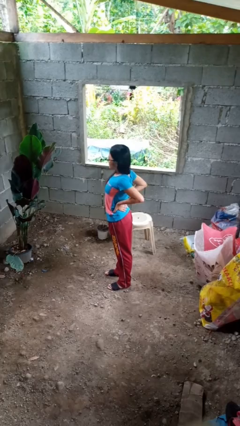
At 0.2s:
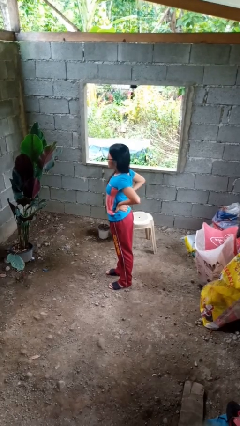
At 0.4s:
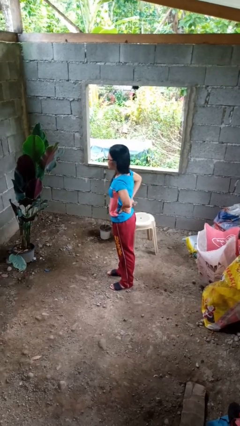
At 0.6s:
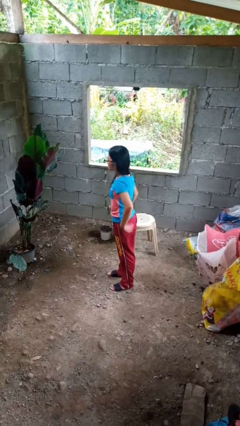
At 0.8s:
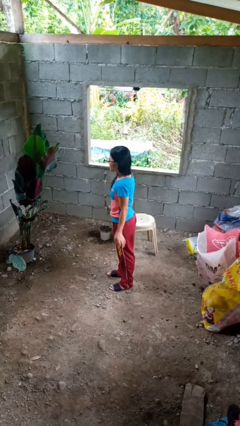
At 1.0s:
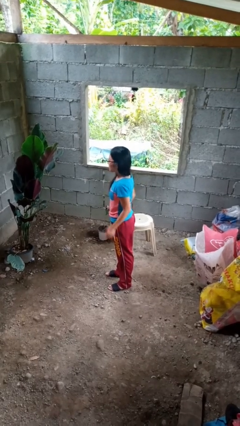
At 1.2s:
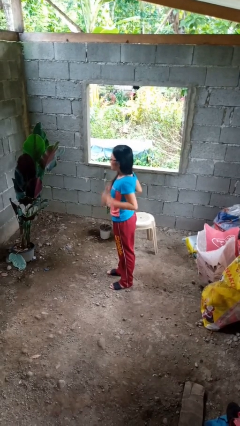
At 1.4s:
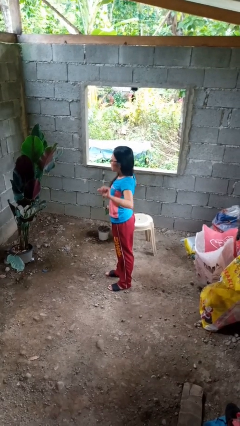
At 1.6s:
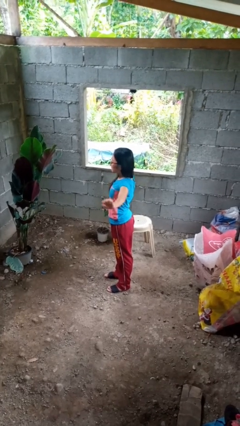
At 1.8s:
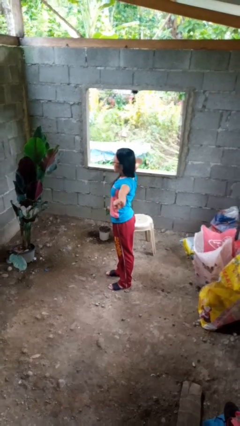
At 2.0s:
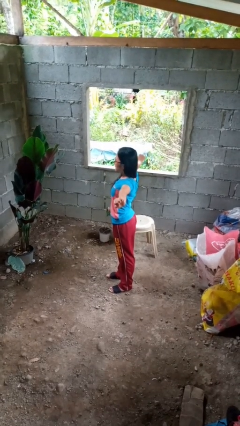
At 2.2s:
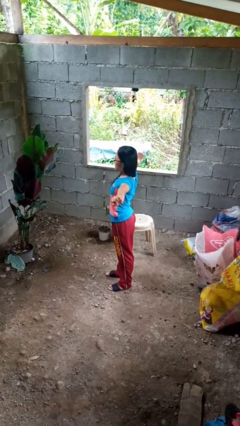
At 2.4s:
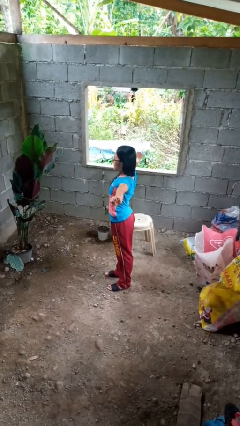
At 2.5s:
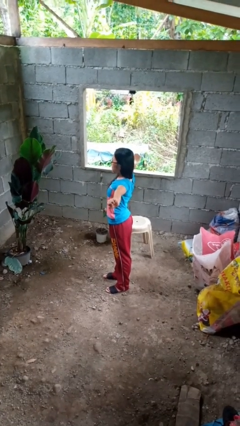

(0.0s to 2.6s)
person stretches arms to side

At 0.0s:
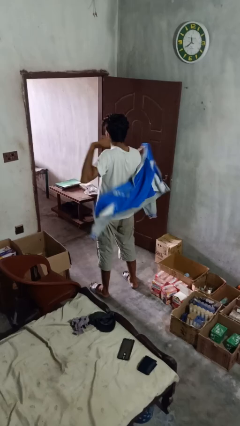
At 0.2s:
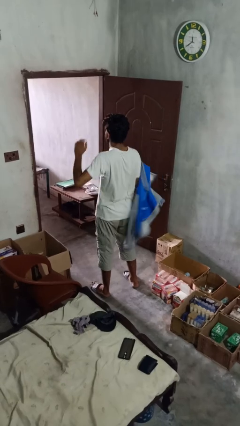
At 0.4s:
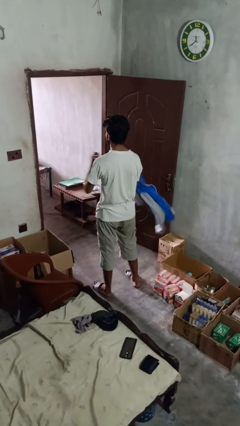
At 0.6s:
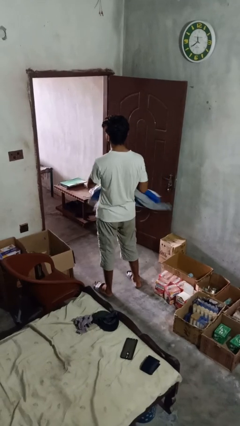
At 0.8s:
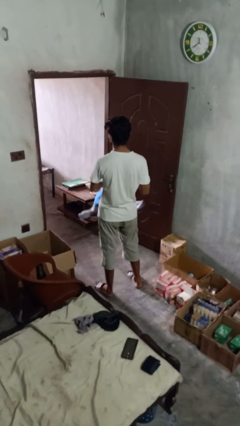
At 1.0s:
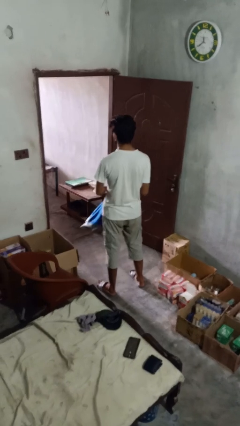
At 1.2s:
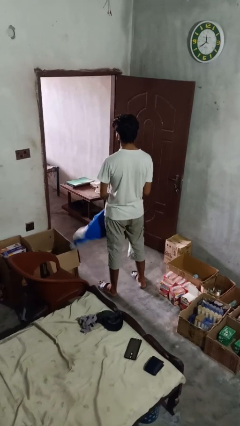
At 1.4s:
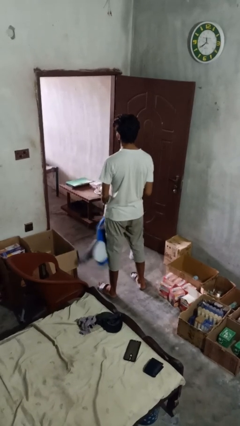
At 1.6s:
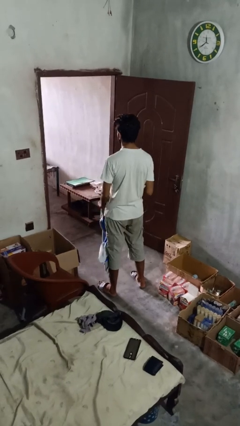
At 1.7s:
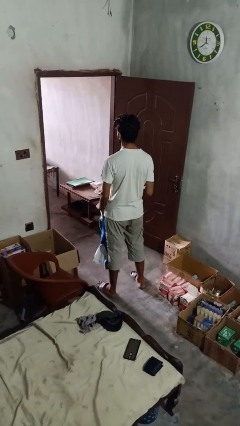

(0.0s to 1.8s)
person takes off jacket

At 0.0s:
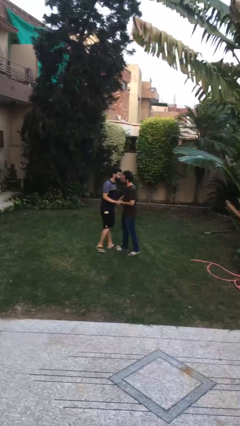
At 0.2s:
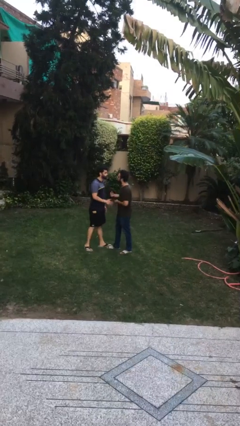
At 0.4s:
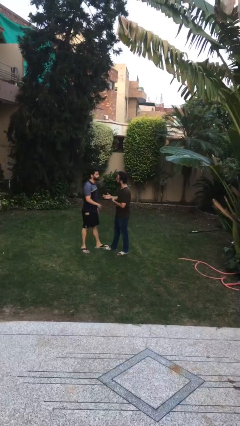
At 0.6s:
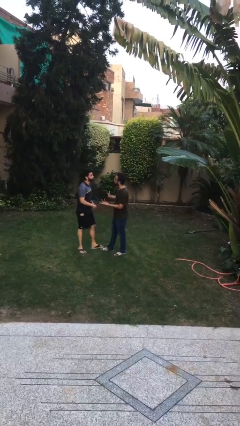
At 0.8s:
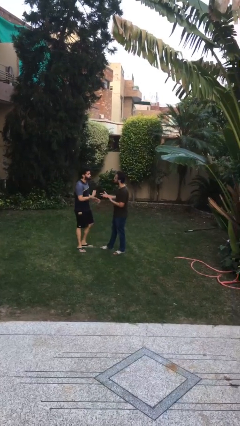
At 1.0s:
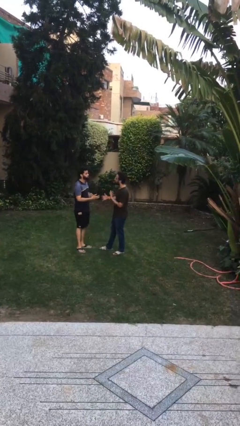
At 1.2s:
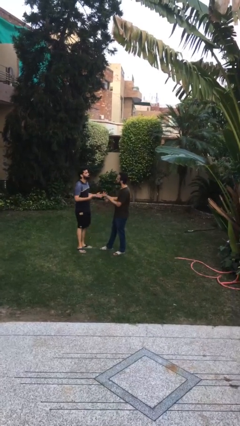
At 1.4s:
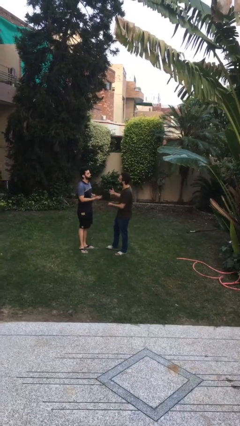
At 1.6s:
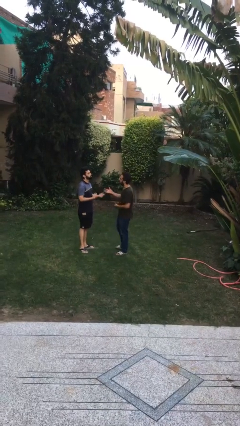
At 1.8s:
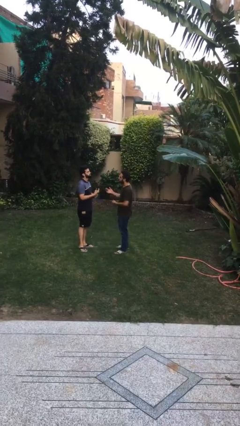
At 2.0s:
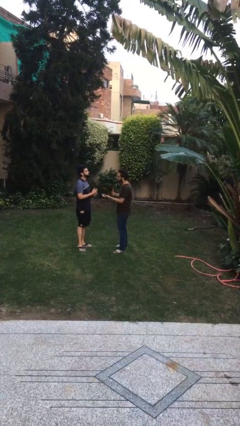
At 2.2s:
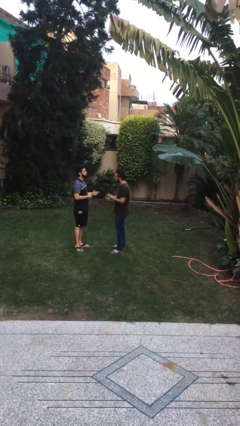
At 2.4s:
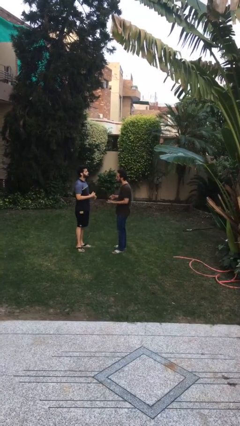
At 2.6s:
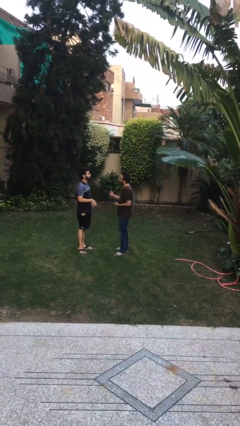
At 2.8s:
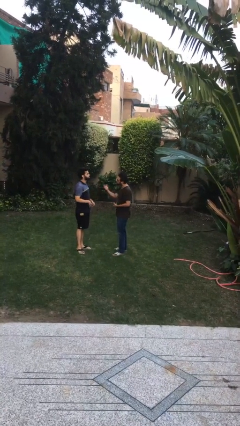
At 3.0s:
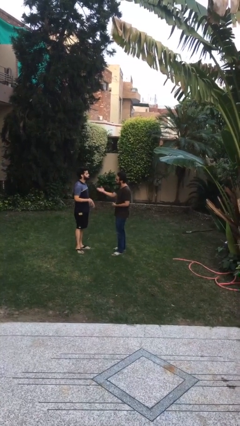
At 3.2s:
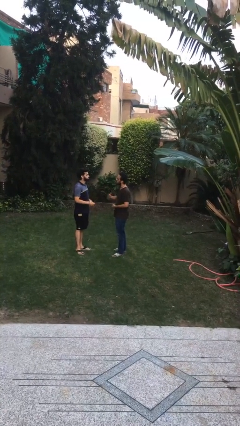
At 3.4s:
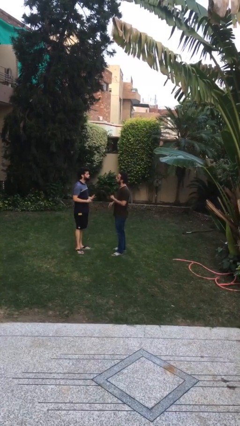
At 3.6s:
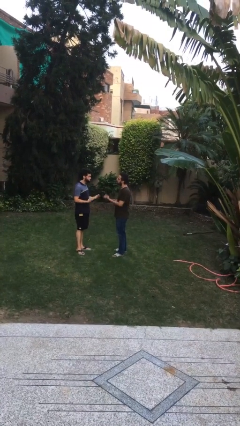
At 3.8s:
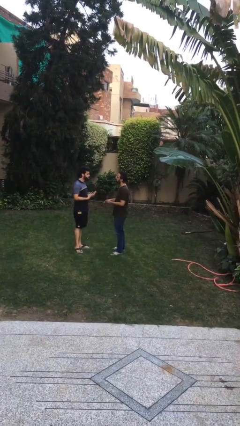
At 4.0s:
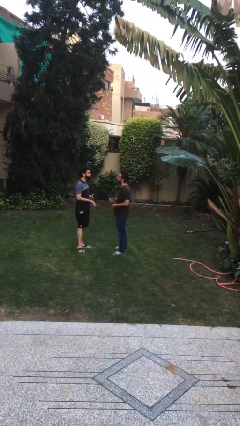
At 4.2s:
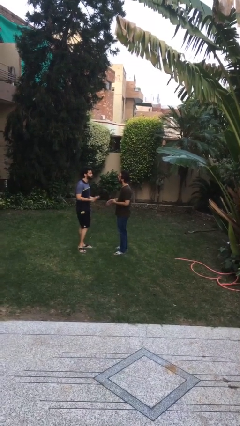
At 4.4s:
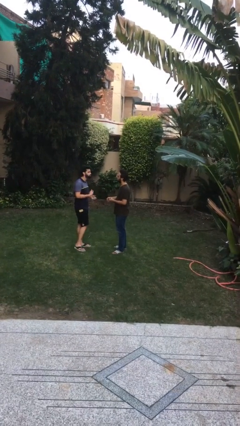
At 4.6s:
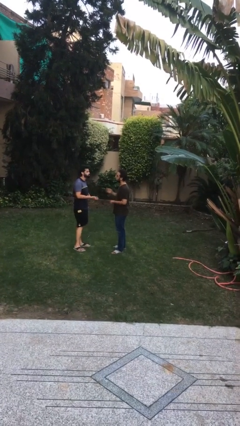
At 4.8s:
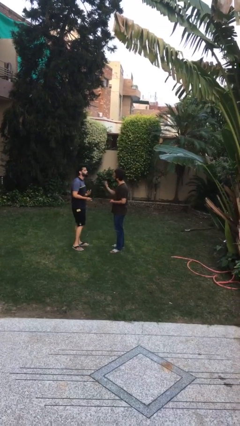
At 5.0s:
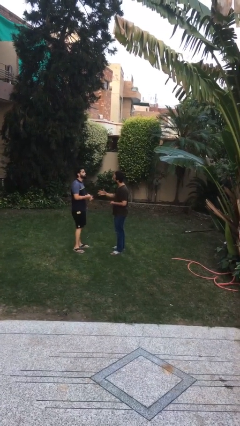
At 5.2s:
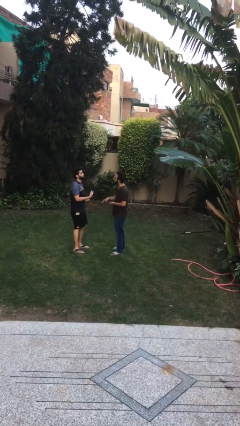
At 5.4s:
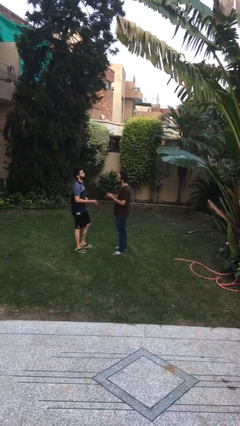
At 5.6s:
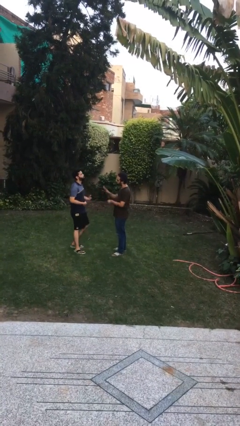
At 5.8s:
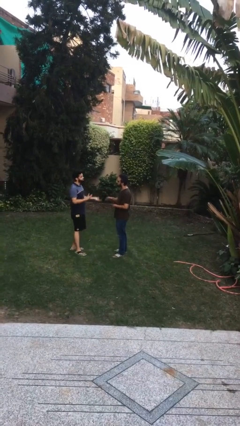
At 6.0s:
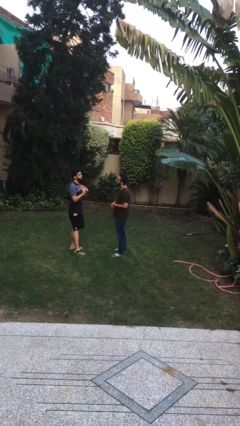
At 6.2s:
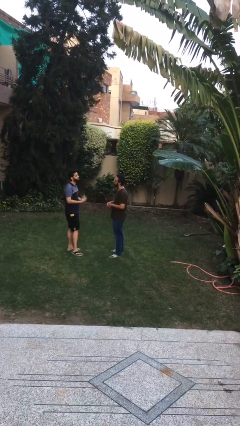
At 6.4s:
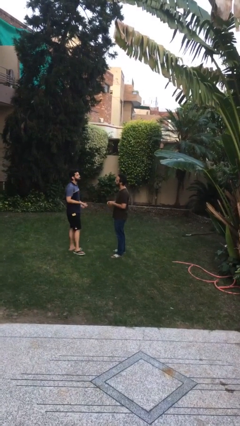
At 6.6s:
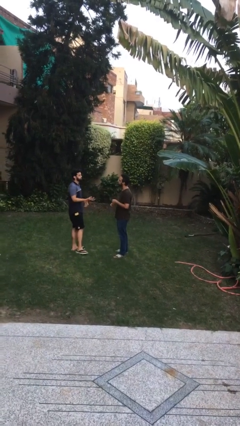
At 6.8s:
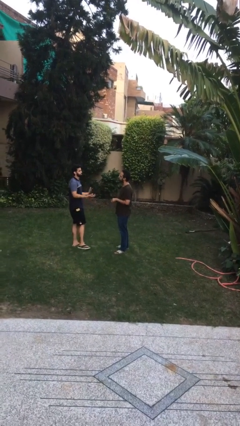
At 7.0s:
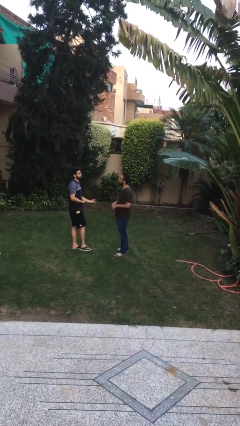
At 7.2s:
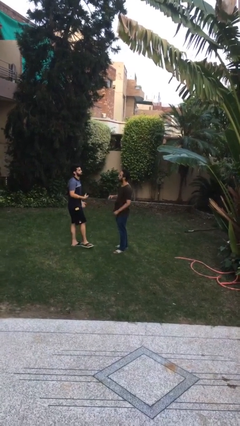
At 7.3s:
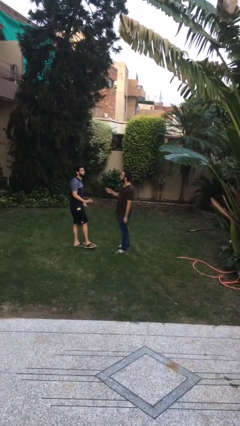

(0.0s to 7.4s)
person talks to person

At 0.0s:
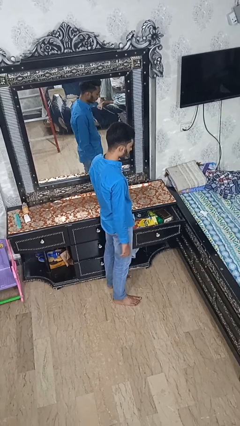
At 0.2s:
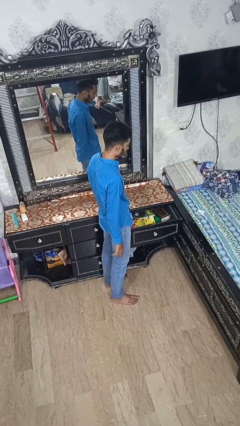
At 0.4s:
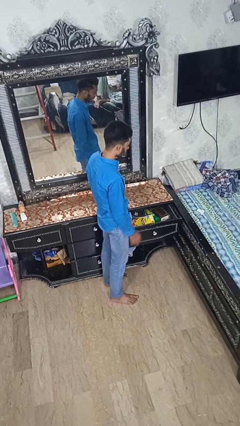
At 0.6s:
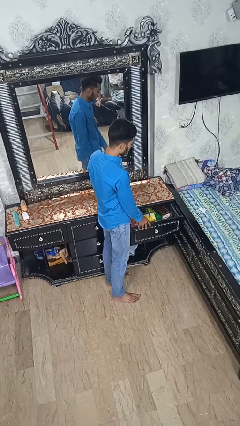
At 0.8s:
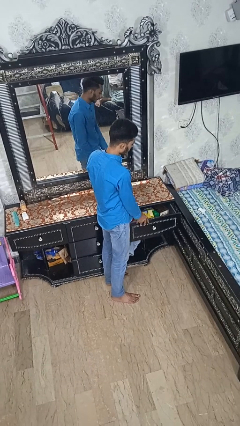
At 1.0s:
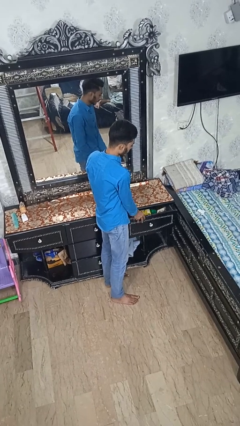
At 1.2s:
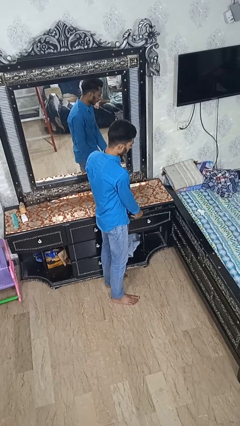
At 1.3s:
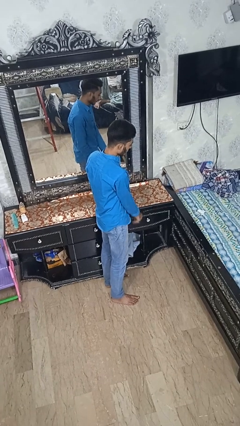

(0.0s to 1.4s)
person closes dresser drawer

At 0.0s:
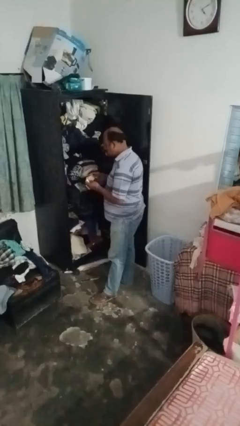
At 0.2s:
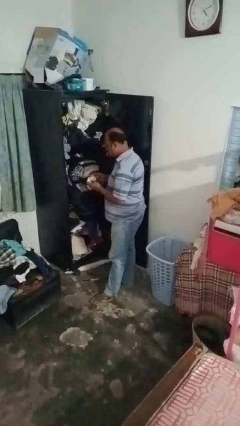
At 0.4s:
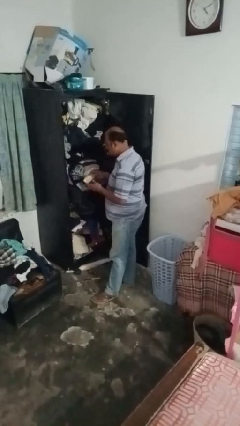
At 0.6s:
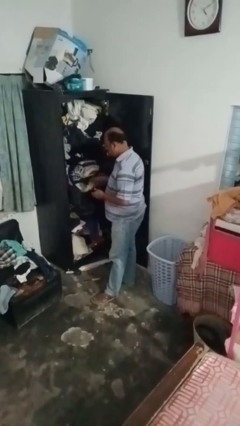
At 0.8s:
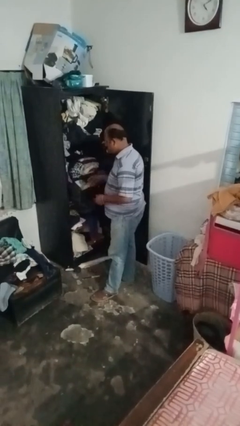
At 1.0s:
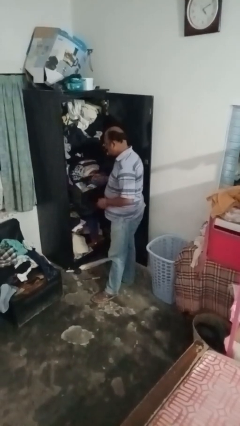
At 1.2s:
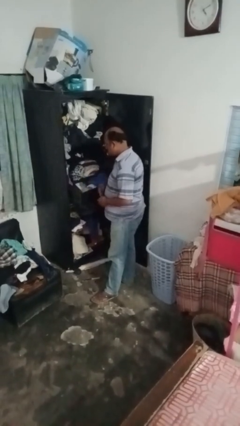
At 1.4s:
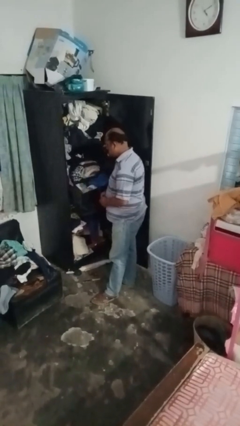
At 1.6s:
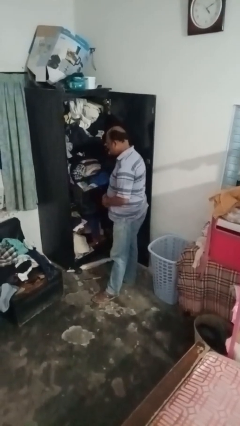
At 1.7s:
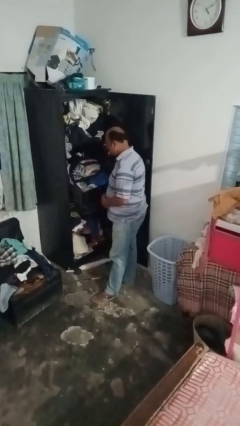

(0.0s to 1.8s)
person takes clothes from dresser

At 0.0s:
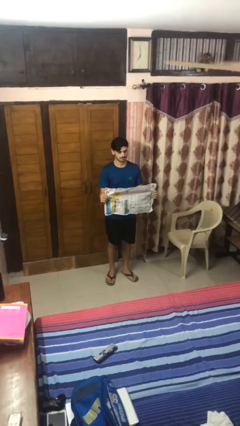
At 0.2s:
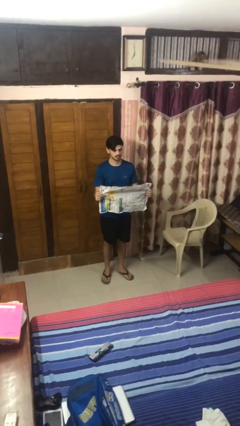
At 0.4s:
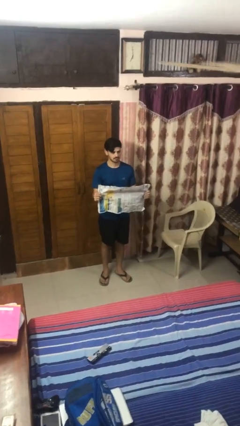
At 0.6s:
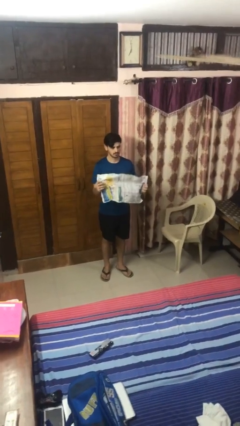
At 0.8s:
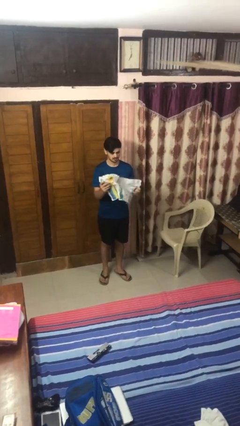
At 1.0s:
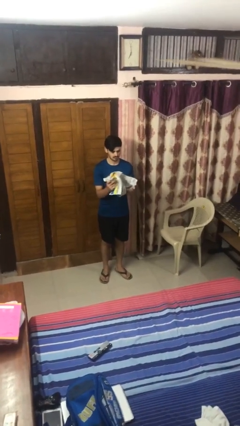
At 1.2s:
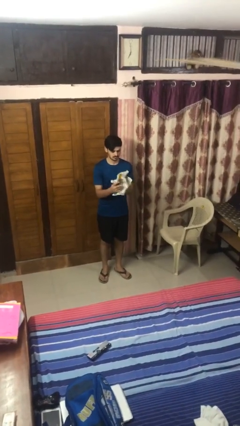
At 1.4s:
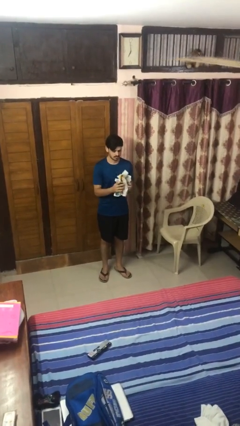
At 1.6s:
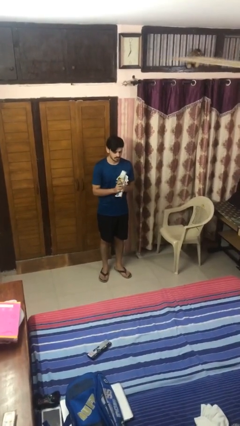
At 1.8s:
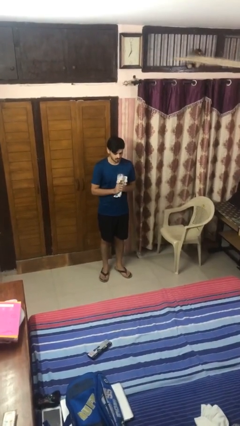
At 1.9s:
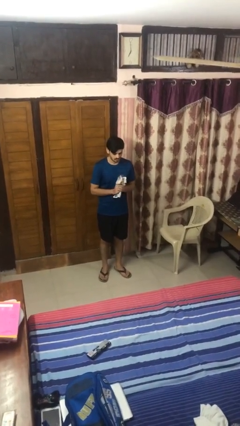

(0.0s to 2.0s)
person crumples paper

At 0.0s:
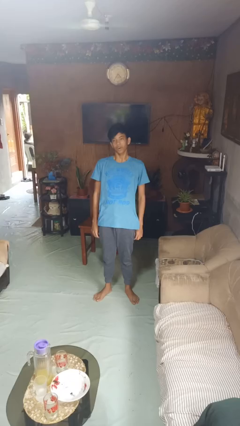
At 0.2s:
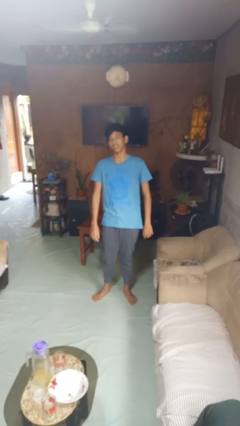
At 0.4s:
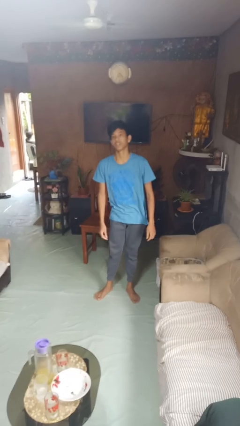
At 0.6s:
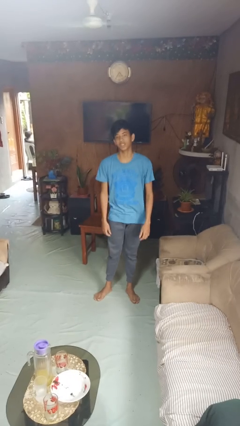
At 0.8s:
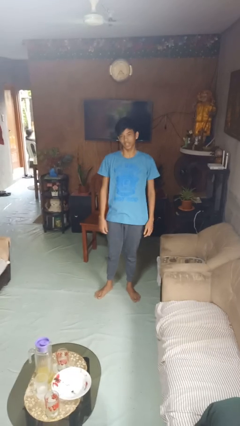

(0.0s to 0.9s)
person dances in place
